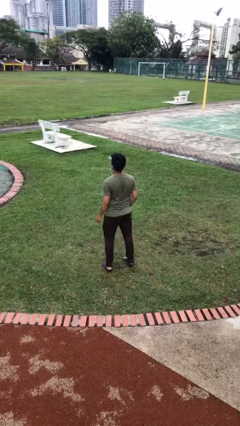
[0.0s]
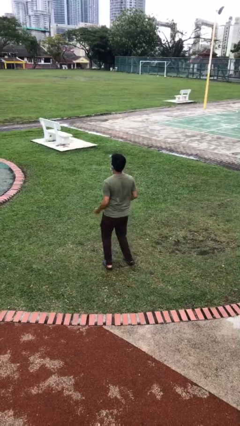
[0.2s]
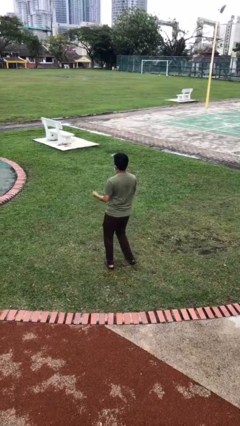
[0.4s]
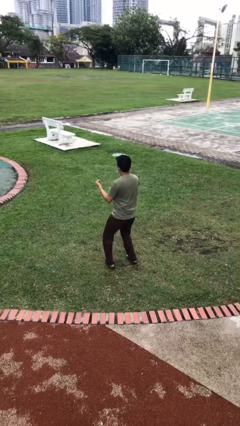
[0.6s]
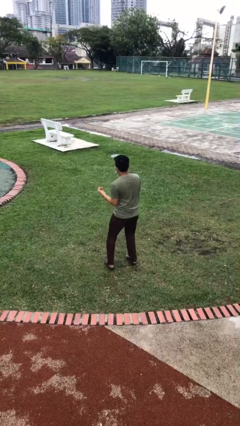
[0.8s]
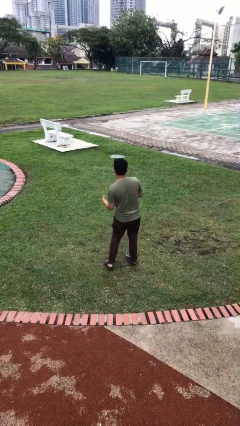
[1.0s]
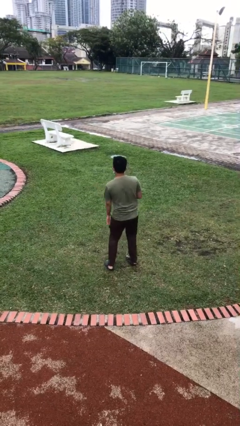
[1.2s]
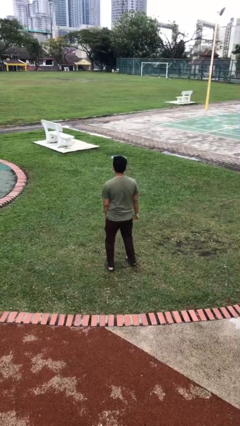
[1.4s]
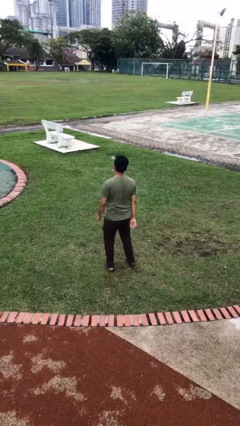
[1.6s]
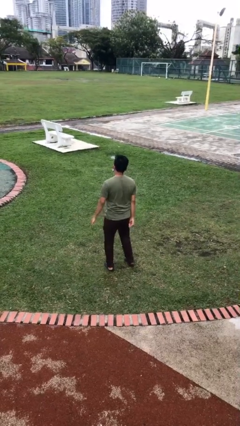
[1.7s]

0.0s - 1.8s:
person dances in place

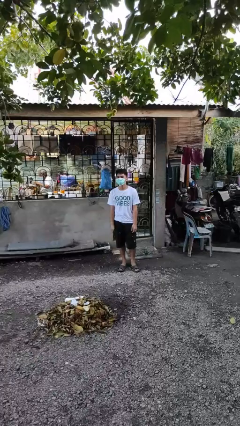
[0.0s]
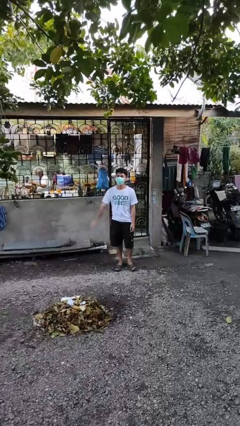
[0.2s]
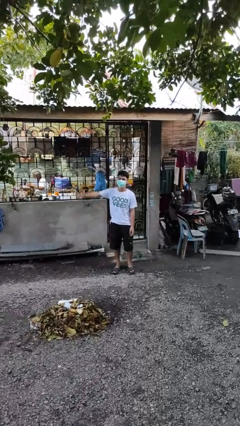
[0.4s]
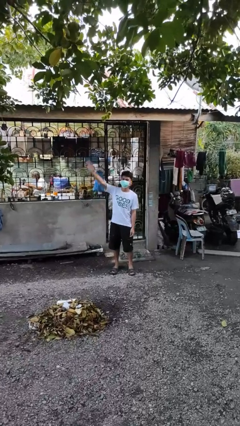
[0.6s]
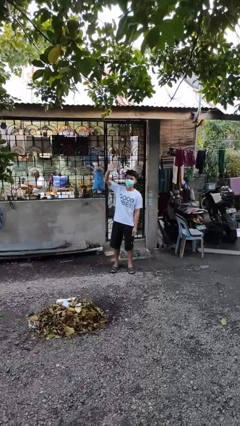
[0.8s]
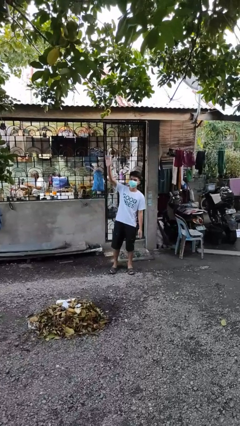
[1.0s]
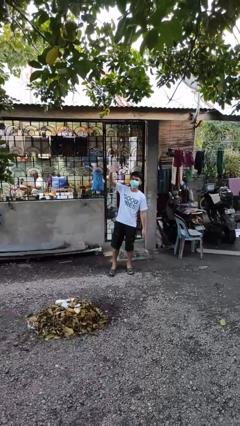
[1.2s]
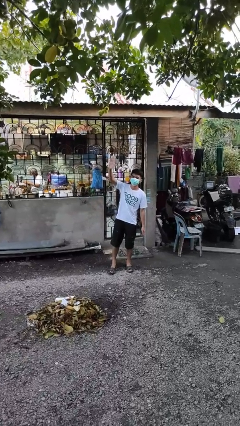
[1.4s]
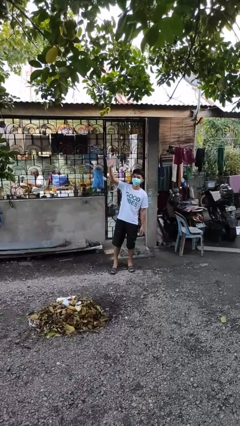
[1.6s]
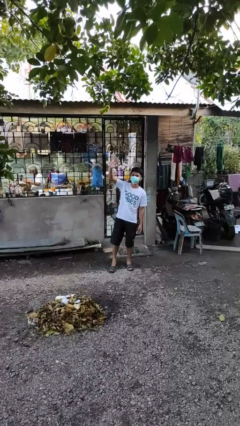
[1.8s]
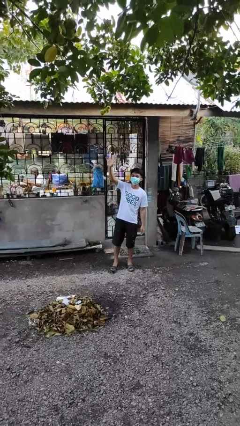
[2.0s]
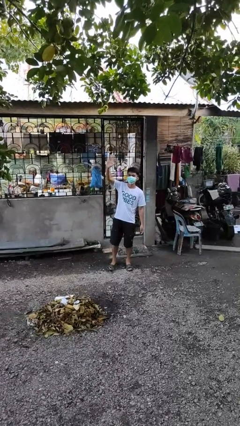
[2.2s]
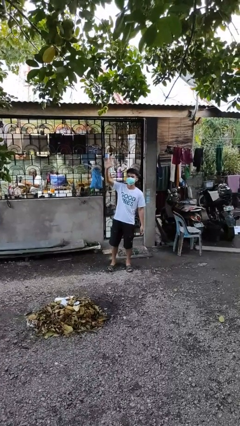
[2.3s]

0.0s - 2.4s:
person waves at person

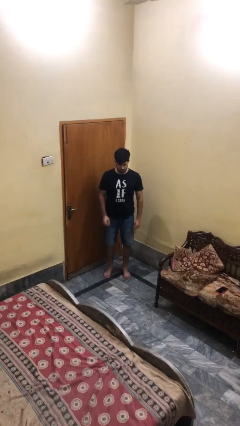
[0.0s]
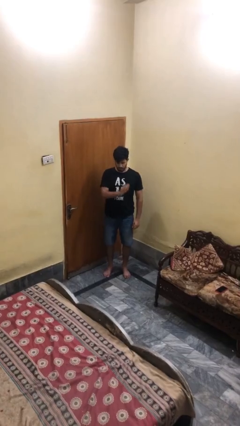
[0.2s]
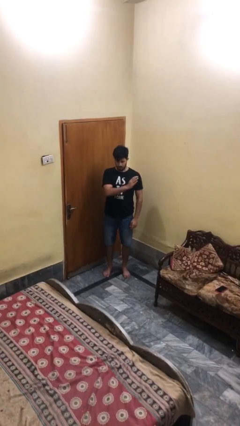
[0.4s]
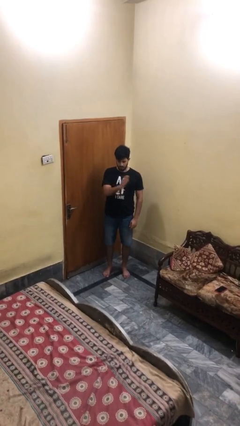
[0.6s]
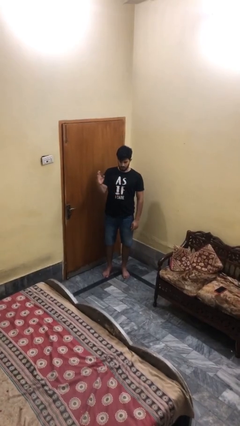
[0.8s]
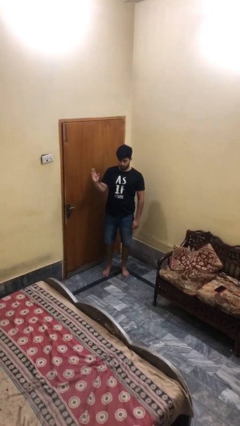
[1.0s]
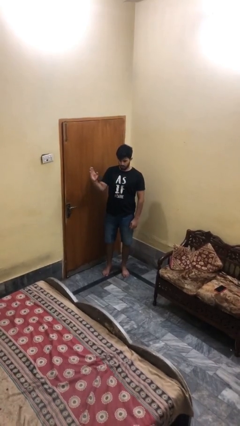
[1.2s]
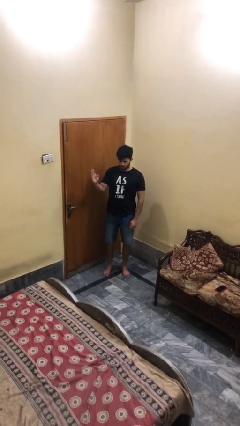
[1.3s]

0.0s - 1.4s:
person gestures swipe right

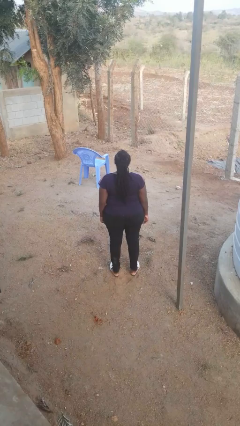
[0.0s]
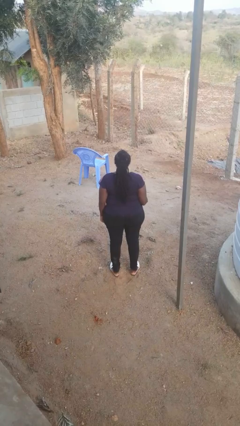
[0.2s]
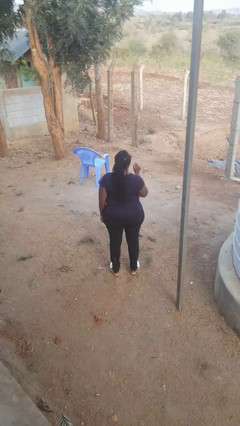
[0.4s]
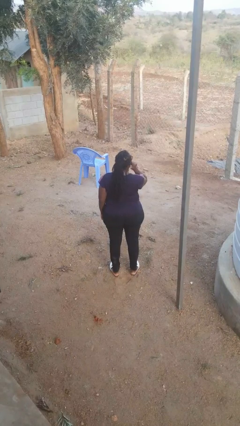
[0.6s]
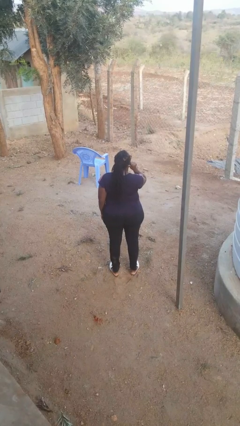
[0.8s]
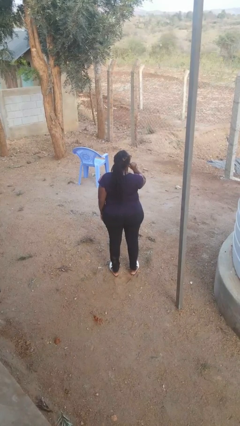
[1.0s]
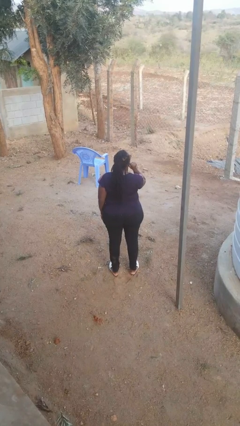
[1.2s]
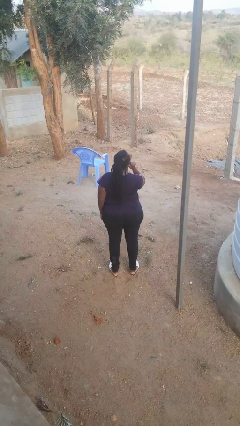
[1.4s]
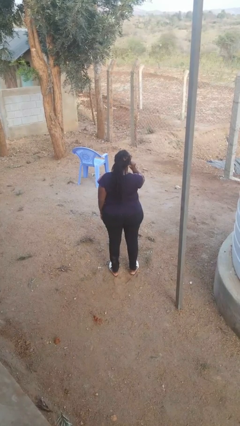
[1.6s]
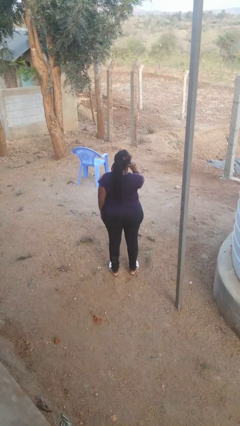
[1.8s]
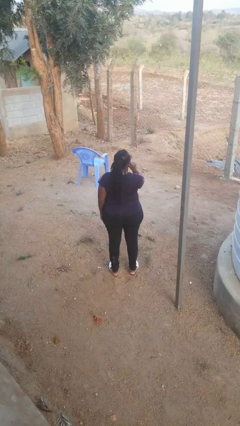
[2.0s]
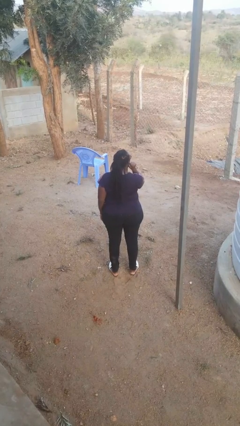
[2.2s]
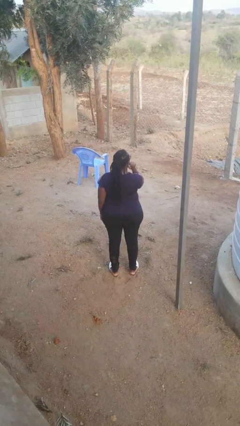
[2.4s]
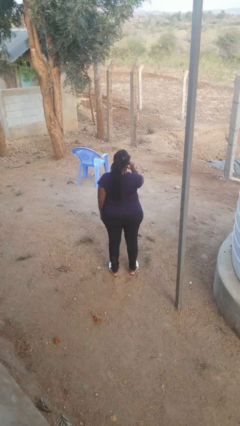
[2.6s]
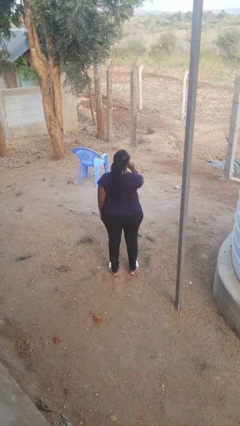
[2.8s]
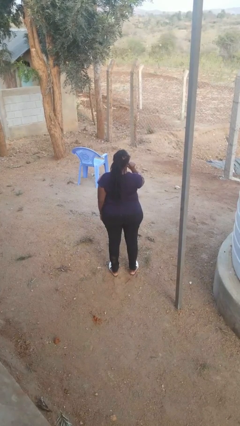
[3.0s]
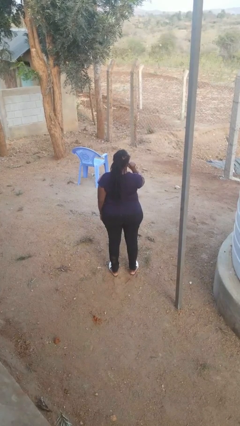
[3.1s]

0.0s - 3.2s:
person touches earlobe

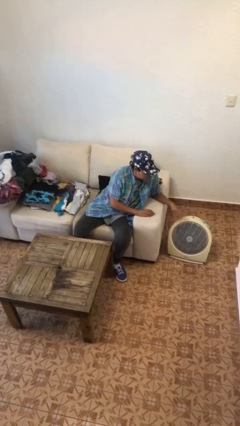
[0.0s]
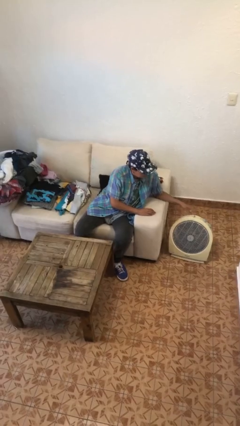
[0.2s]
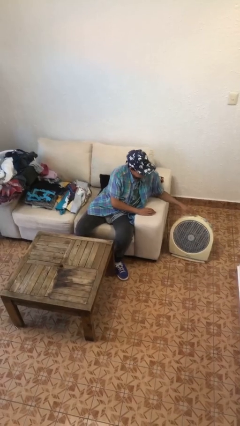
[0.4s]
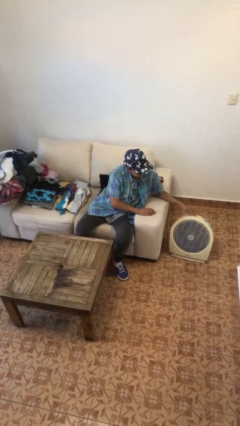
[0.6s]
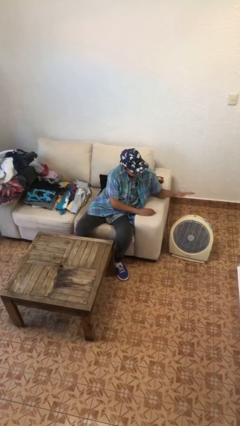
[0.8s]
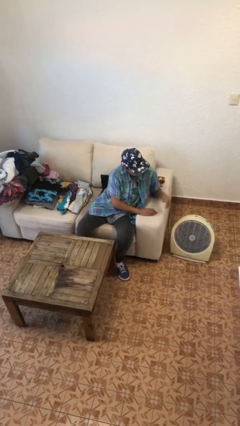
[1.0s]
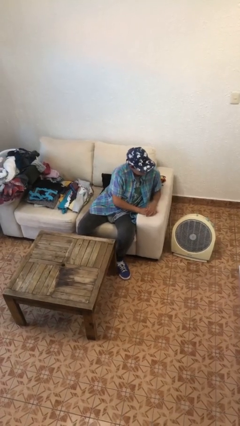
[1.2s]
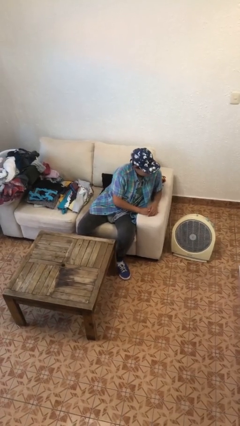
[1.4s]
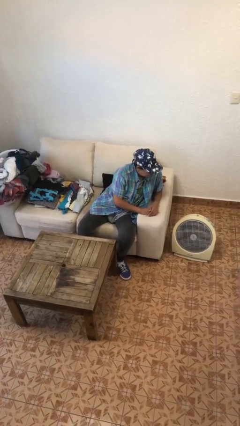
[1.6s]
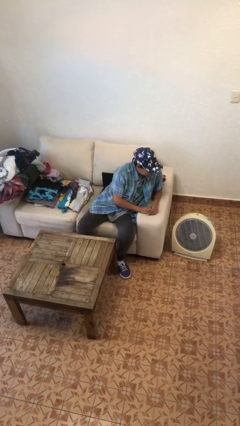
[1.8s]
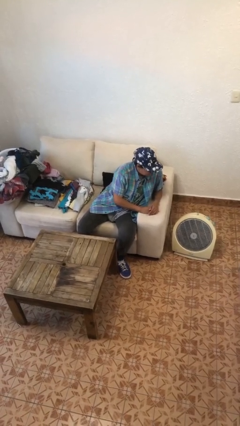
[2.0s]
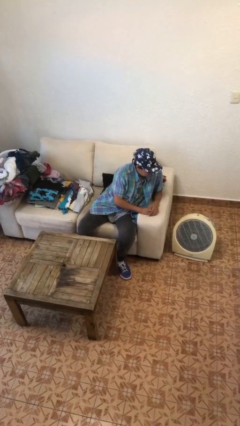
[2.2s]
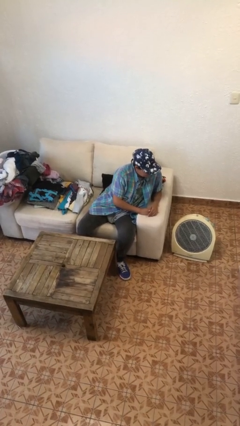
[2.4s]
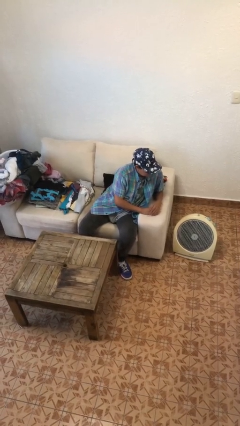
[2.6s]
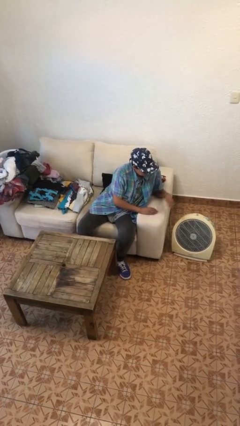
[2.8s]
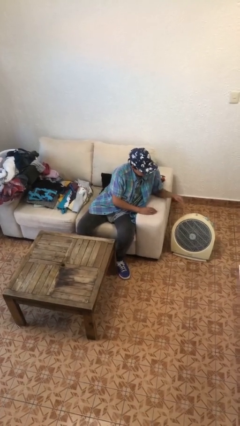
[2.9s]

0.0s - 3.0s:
person turns on fan

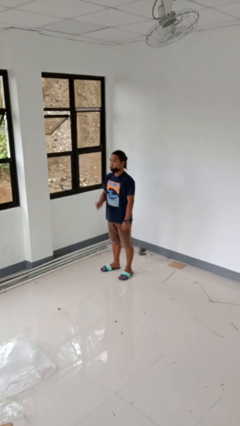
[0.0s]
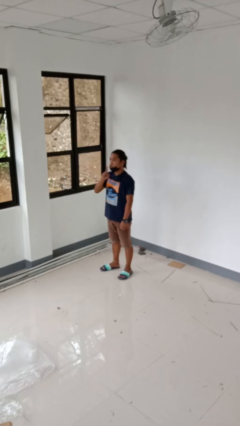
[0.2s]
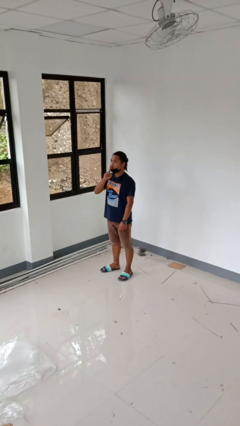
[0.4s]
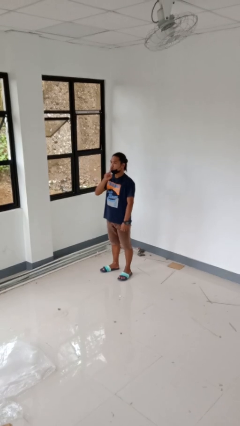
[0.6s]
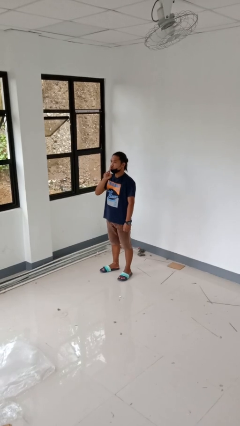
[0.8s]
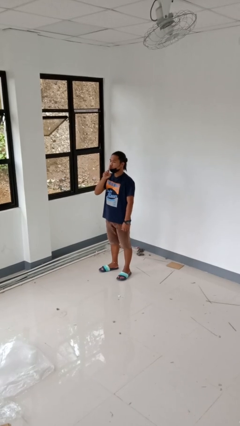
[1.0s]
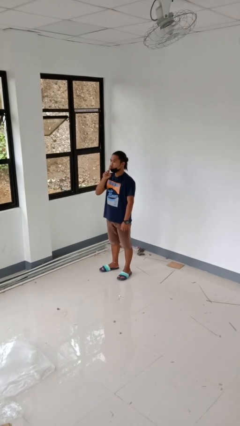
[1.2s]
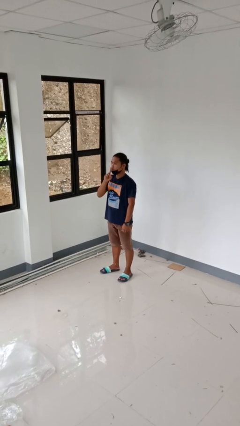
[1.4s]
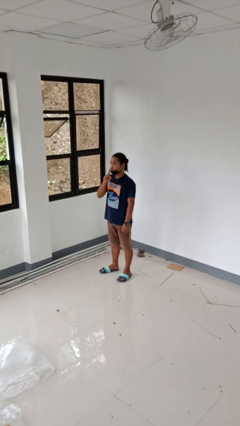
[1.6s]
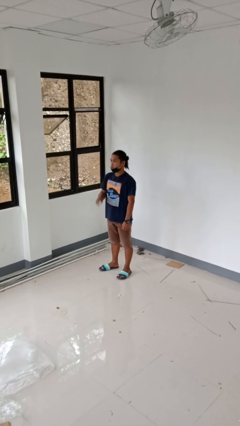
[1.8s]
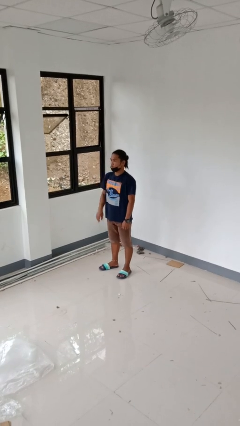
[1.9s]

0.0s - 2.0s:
person gestures be quiet

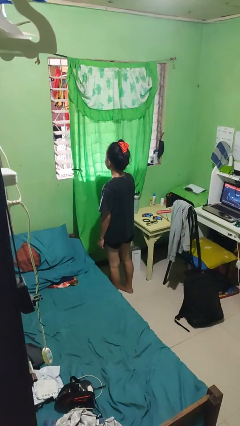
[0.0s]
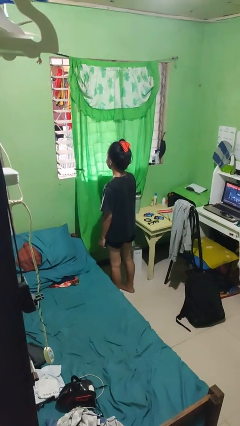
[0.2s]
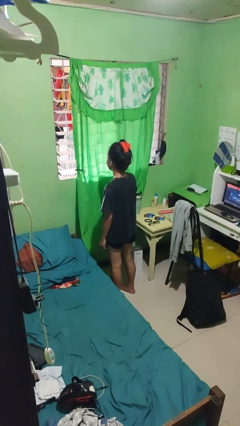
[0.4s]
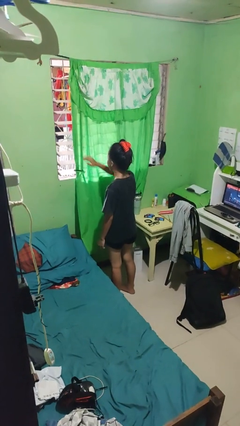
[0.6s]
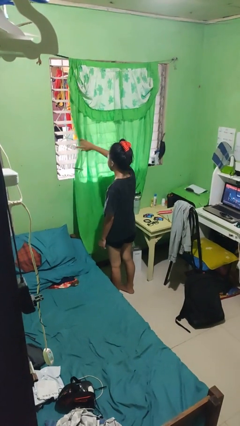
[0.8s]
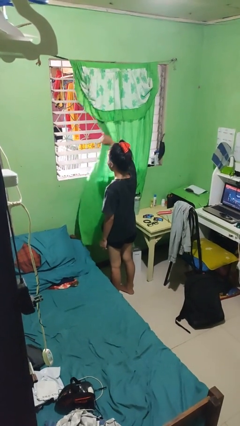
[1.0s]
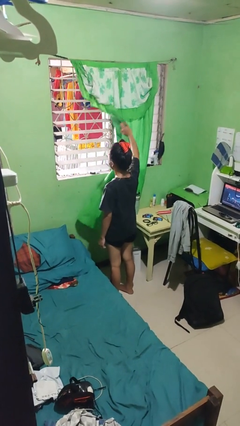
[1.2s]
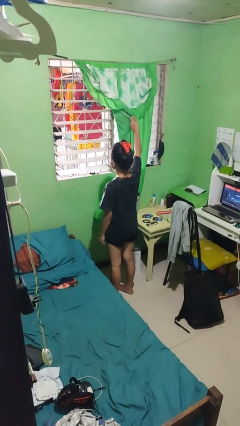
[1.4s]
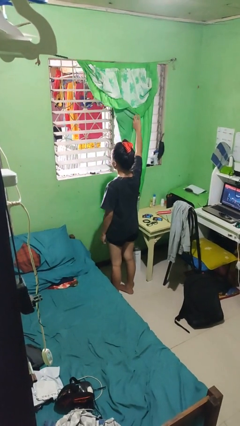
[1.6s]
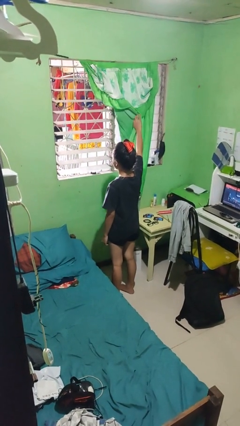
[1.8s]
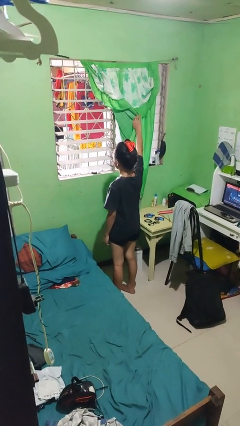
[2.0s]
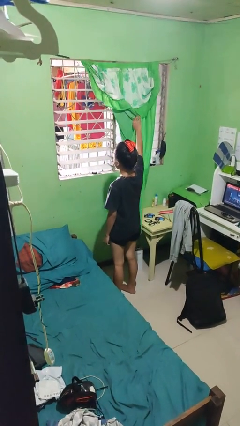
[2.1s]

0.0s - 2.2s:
person opens curtains

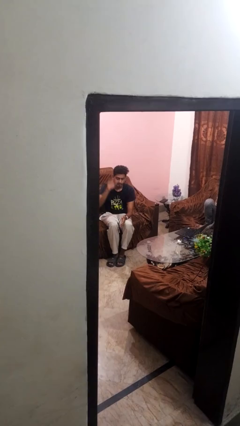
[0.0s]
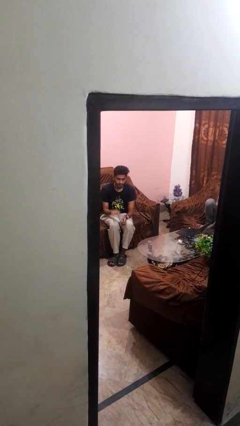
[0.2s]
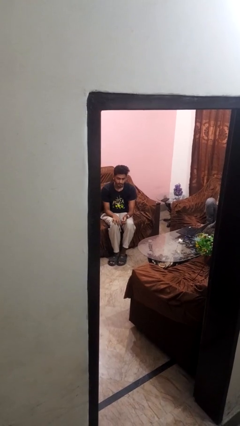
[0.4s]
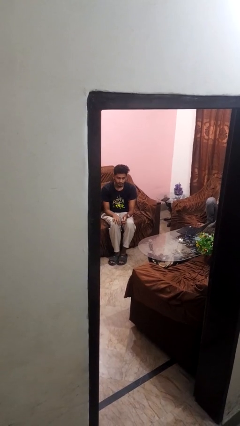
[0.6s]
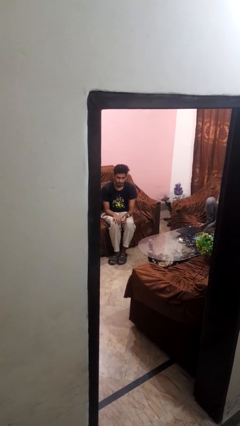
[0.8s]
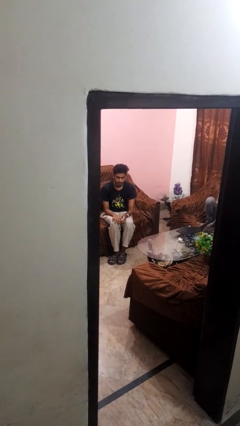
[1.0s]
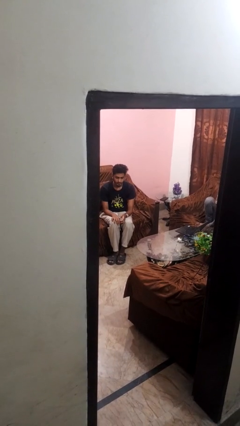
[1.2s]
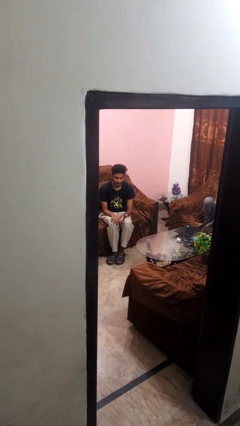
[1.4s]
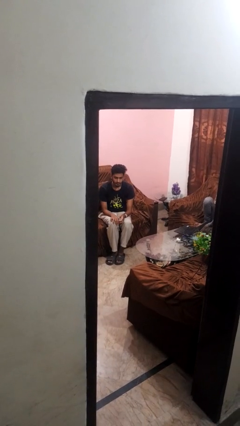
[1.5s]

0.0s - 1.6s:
person gestures lower hand
